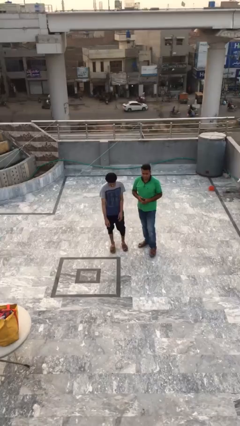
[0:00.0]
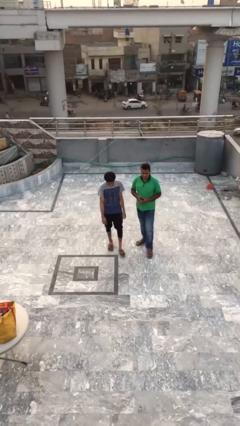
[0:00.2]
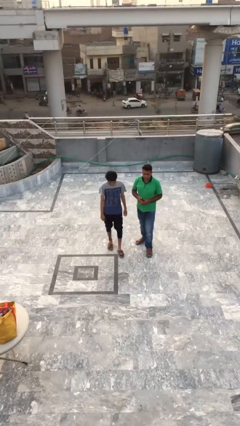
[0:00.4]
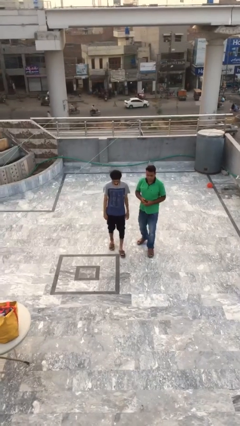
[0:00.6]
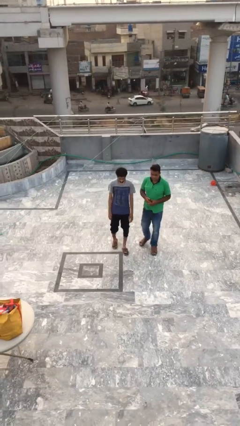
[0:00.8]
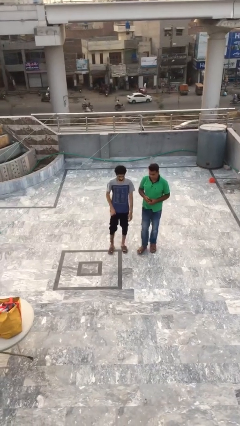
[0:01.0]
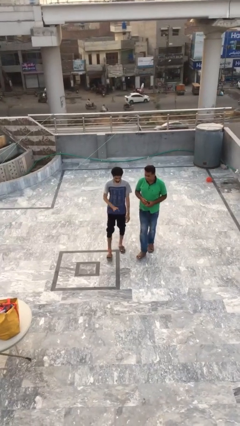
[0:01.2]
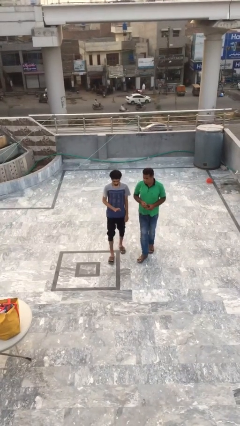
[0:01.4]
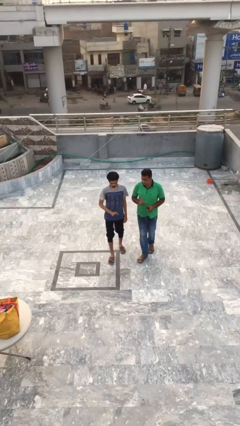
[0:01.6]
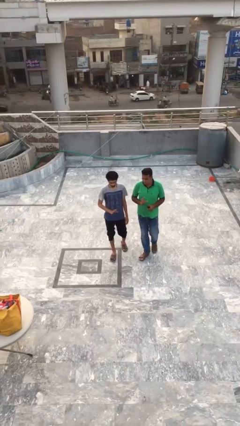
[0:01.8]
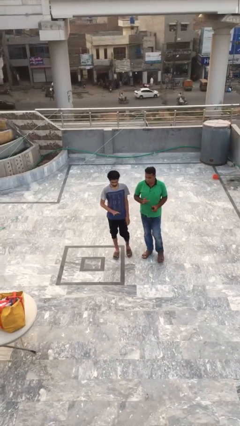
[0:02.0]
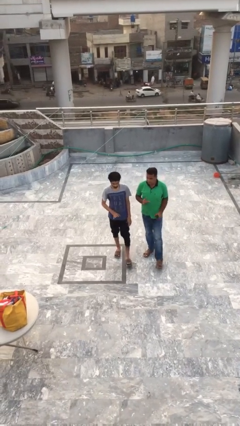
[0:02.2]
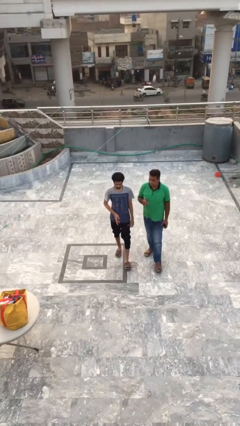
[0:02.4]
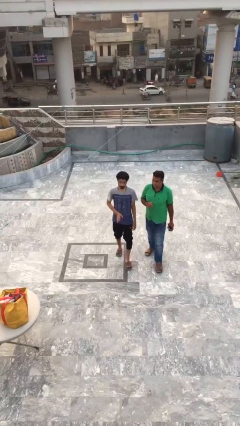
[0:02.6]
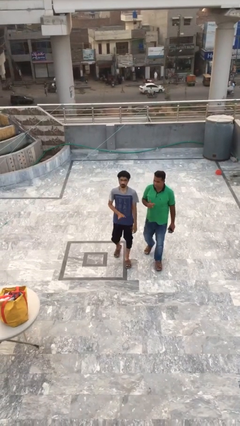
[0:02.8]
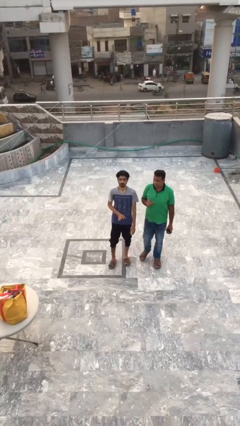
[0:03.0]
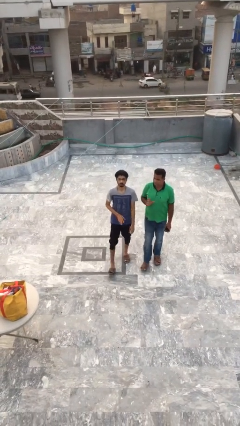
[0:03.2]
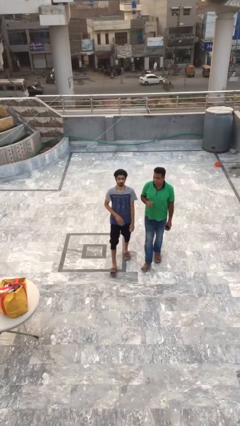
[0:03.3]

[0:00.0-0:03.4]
person talks to person

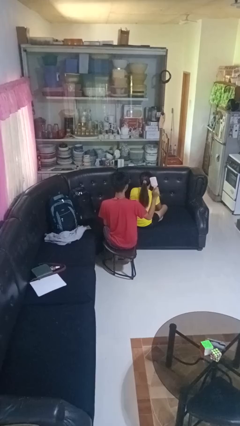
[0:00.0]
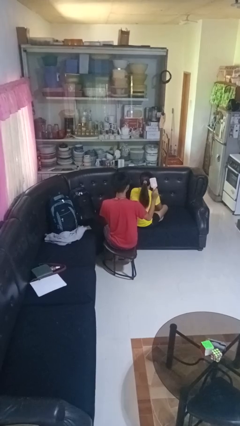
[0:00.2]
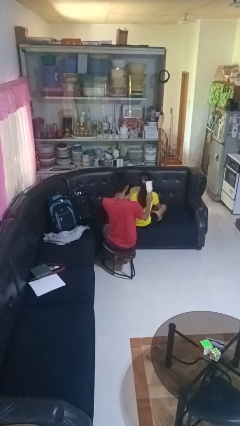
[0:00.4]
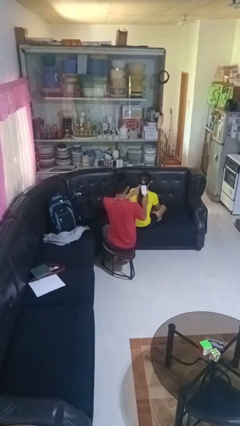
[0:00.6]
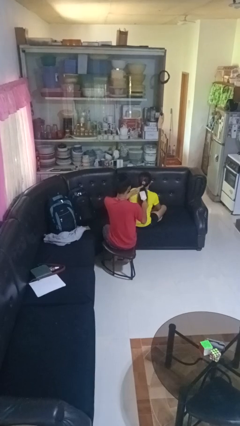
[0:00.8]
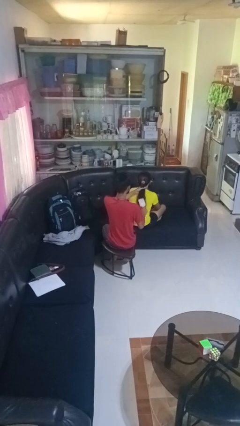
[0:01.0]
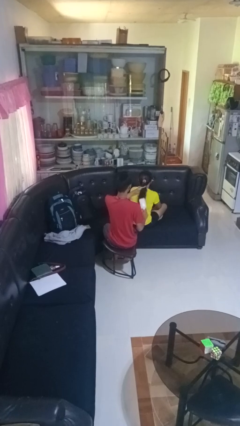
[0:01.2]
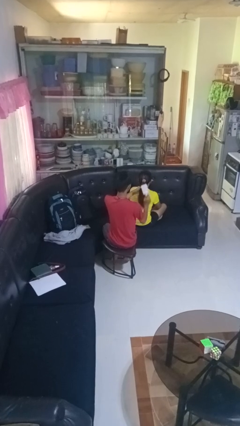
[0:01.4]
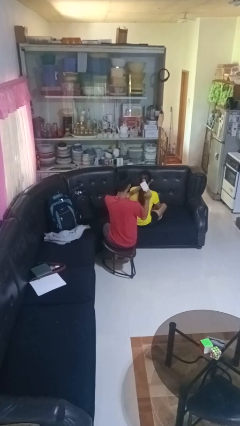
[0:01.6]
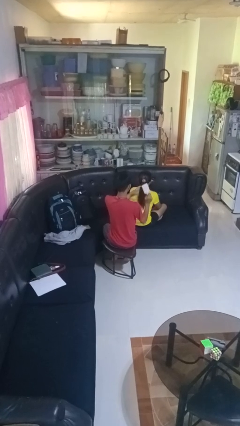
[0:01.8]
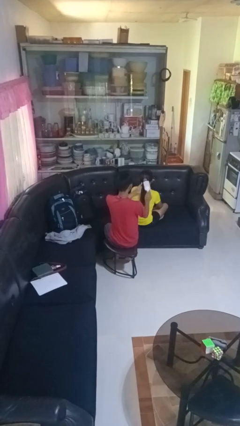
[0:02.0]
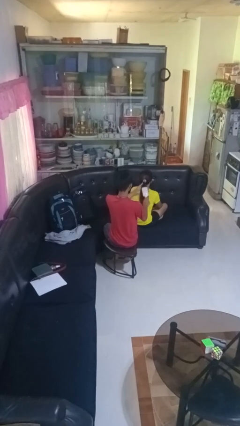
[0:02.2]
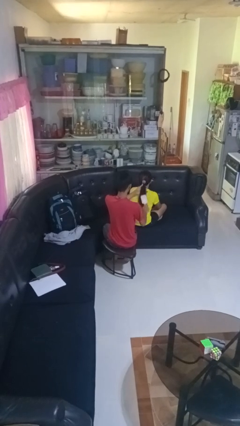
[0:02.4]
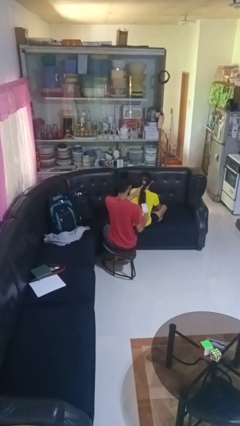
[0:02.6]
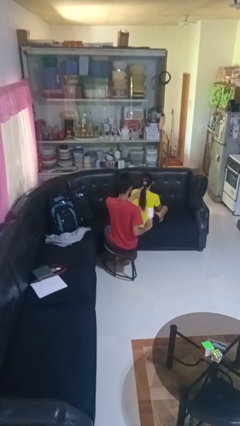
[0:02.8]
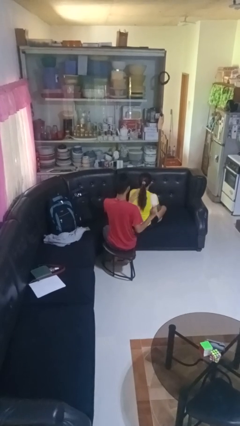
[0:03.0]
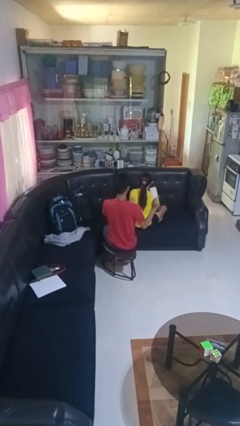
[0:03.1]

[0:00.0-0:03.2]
person brushes hair of person

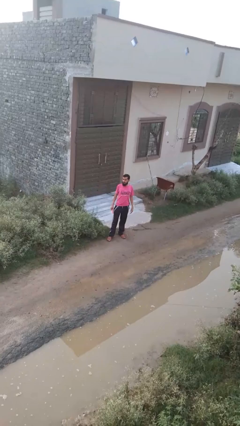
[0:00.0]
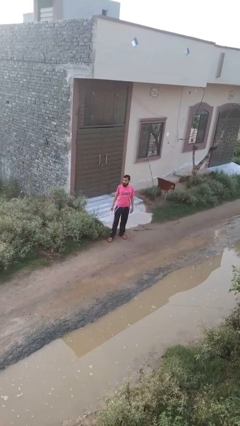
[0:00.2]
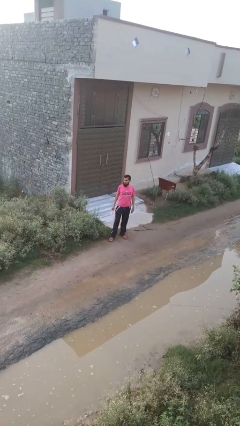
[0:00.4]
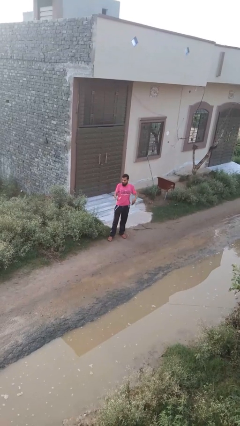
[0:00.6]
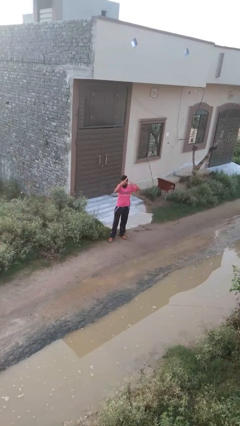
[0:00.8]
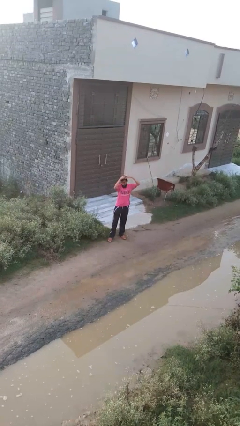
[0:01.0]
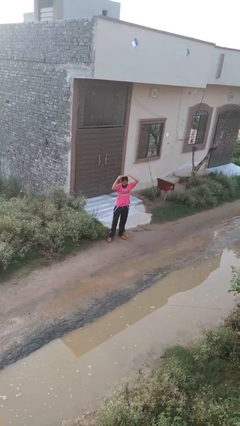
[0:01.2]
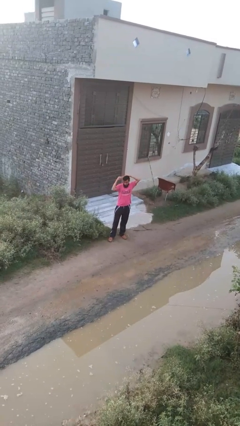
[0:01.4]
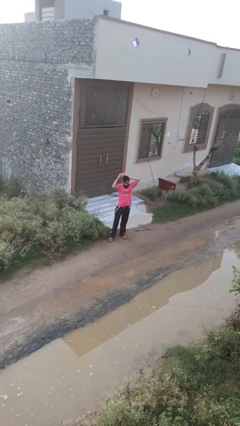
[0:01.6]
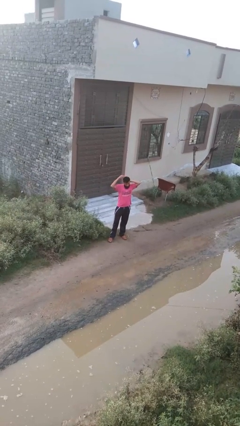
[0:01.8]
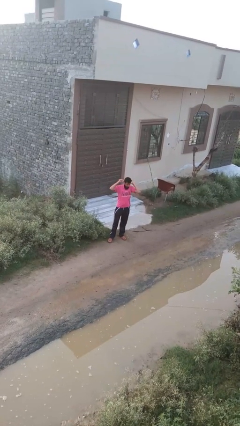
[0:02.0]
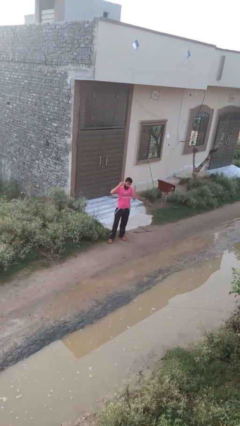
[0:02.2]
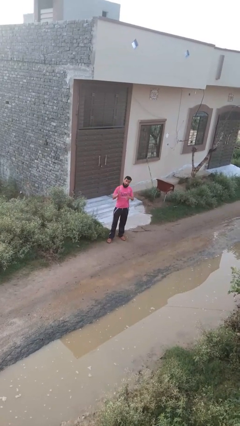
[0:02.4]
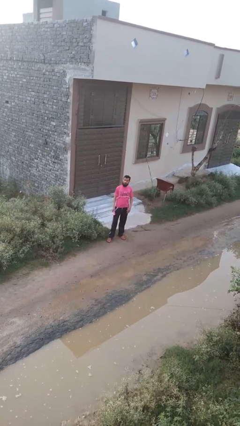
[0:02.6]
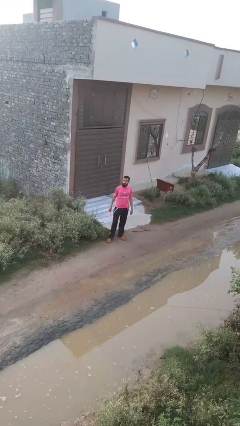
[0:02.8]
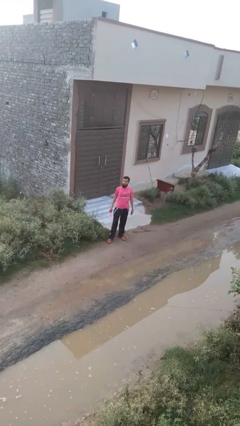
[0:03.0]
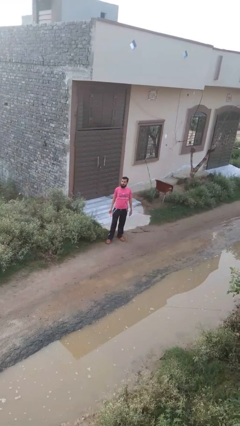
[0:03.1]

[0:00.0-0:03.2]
person brushes hair

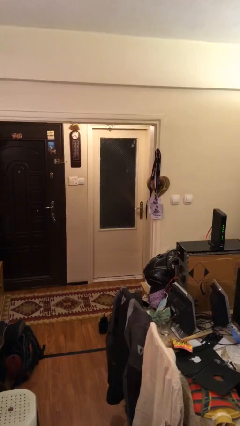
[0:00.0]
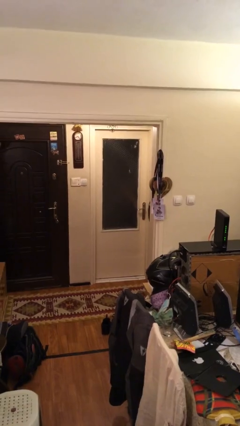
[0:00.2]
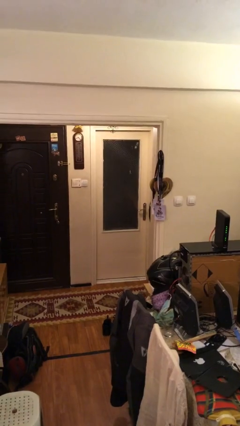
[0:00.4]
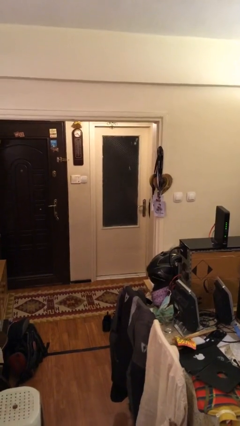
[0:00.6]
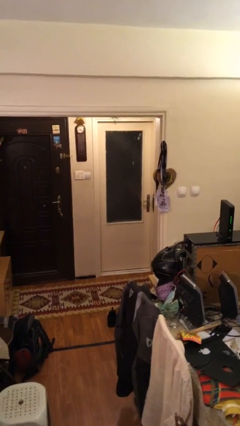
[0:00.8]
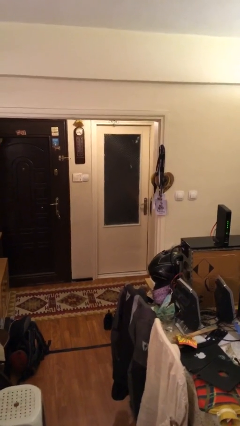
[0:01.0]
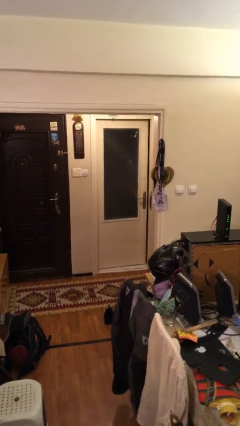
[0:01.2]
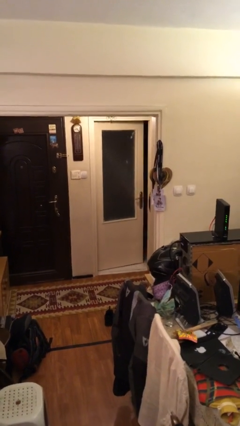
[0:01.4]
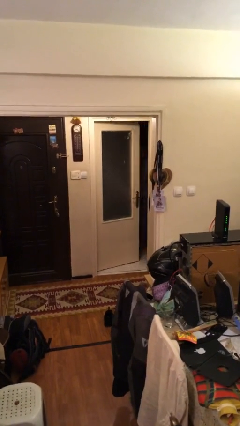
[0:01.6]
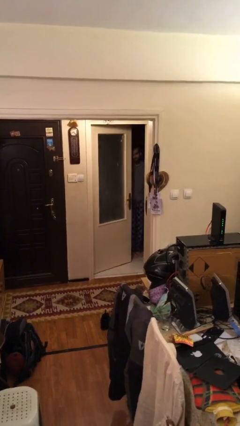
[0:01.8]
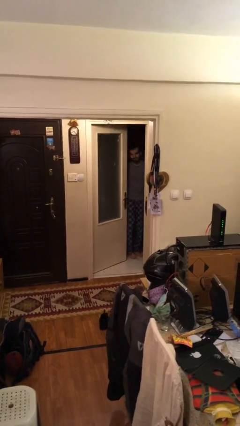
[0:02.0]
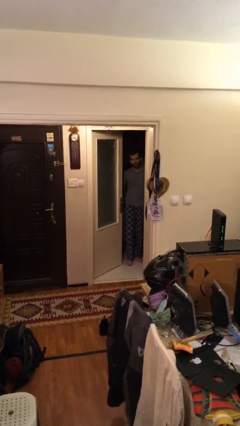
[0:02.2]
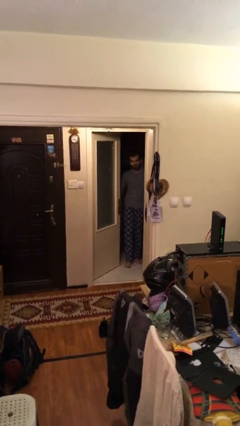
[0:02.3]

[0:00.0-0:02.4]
person opens facility door

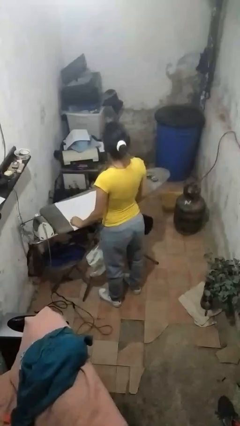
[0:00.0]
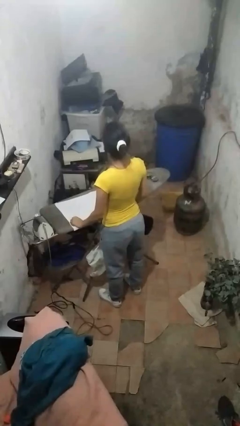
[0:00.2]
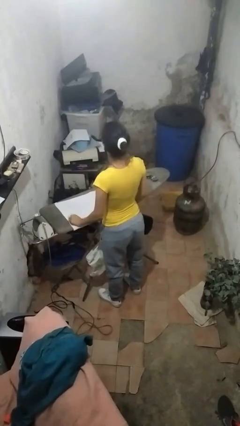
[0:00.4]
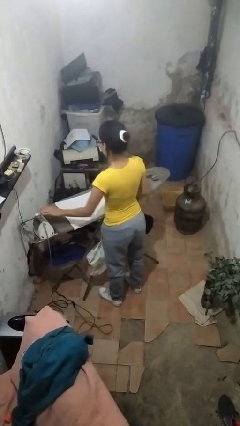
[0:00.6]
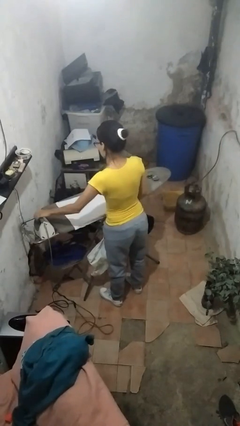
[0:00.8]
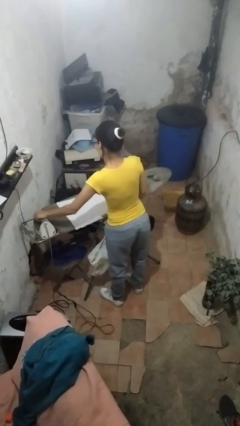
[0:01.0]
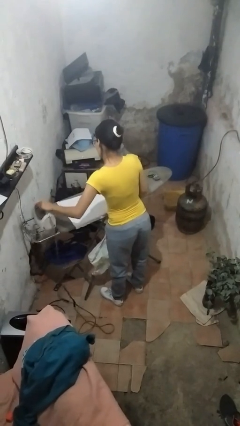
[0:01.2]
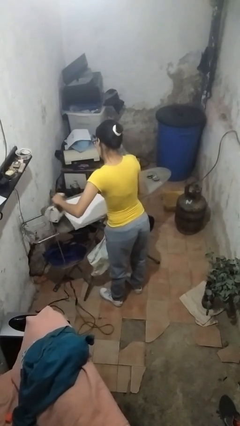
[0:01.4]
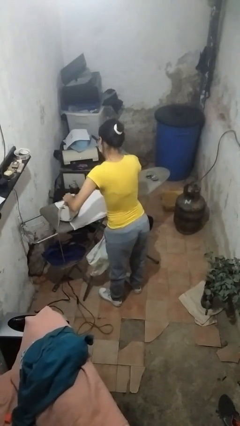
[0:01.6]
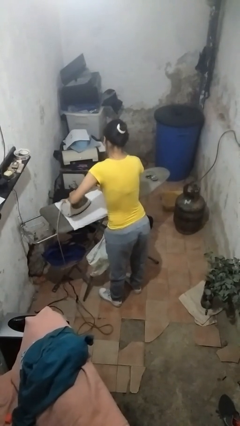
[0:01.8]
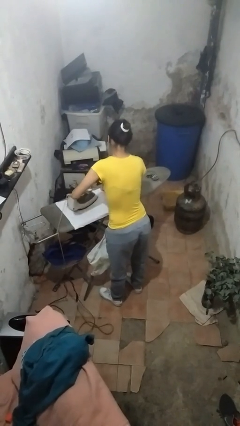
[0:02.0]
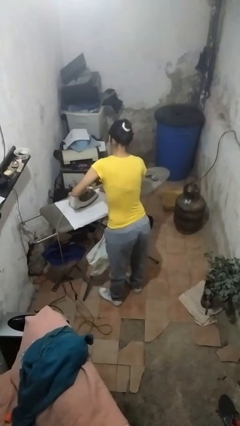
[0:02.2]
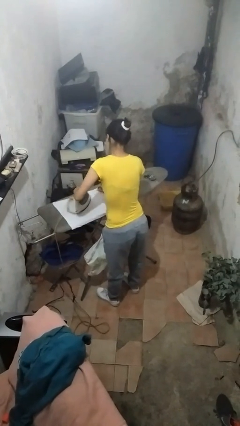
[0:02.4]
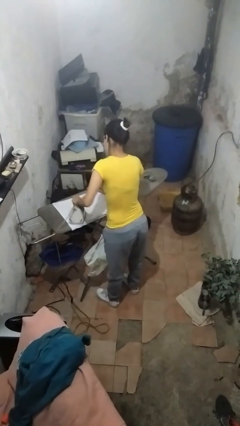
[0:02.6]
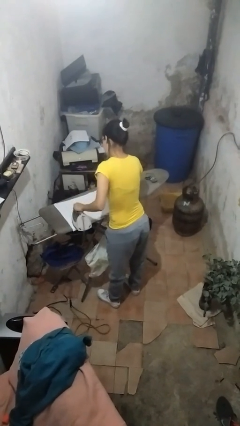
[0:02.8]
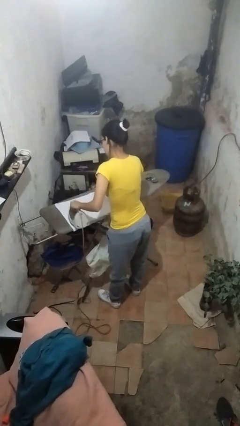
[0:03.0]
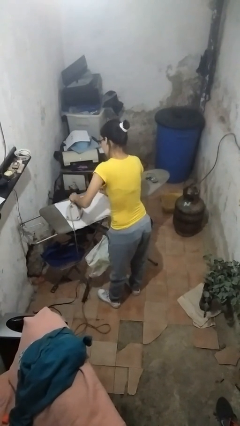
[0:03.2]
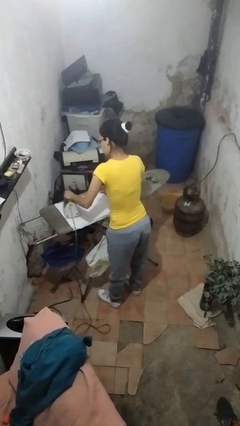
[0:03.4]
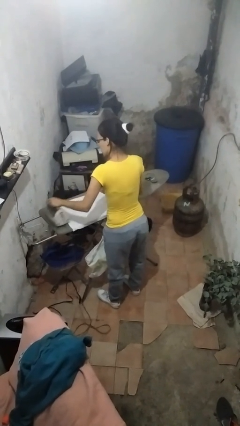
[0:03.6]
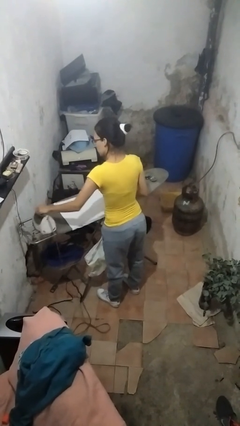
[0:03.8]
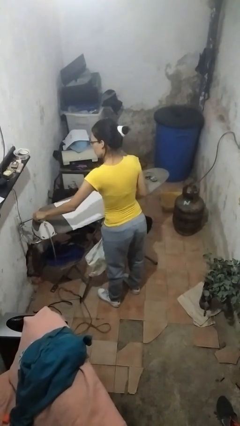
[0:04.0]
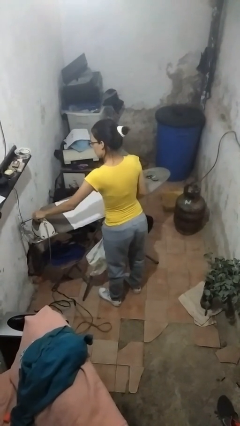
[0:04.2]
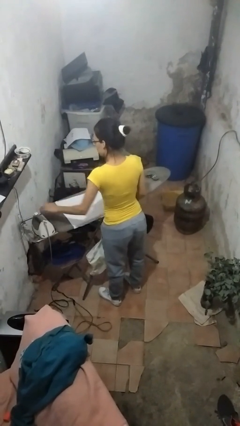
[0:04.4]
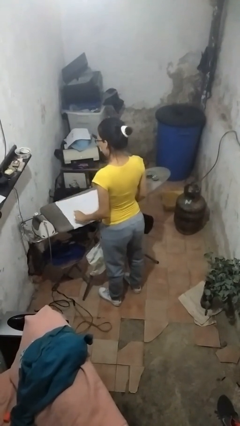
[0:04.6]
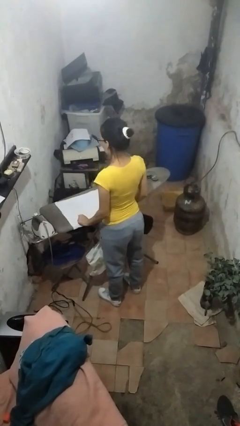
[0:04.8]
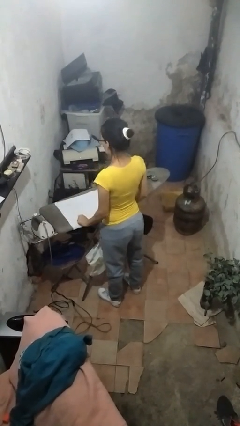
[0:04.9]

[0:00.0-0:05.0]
person irons clothes
